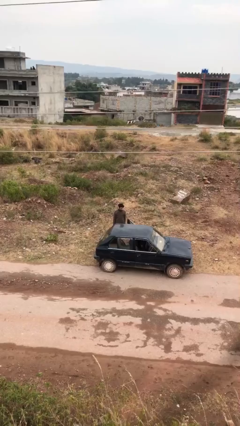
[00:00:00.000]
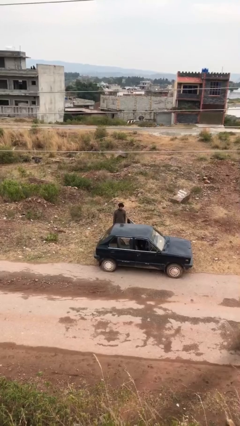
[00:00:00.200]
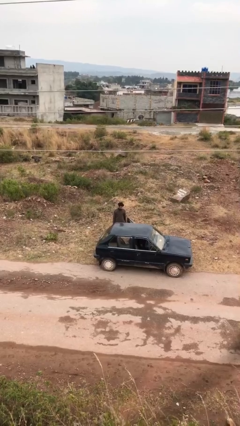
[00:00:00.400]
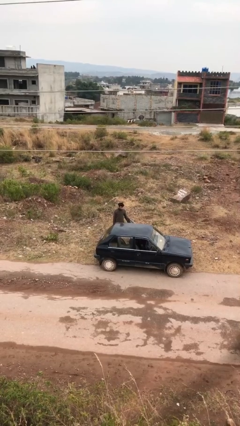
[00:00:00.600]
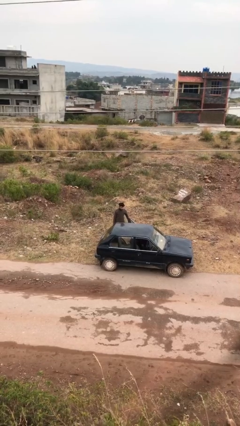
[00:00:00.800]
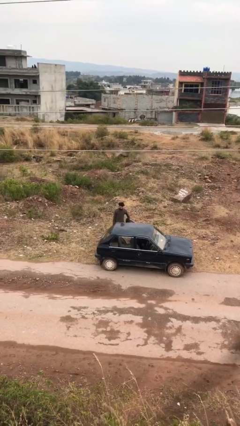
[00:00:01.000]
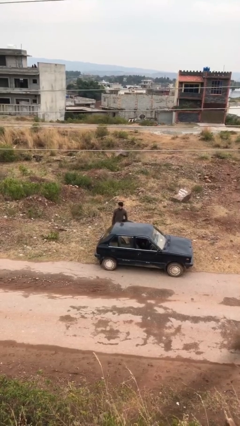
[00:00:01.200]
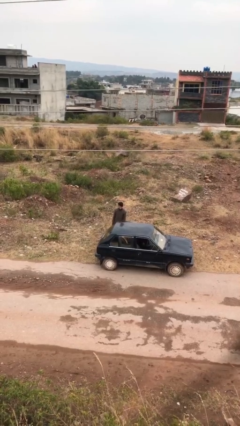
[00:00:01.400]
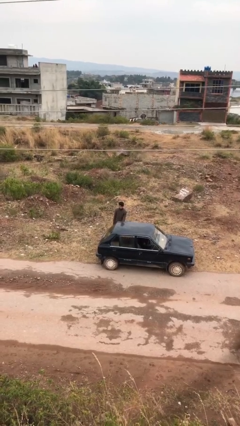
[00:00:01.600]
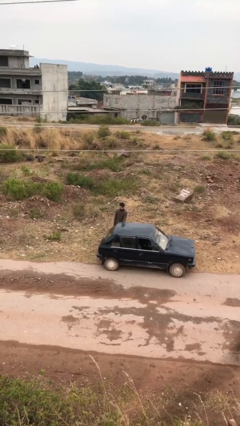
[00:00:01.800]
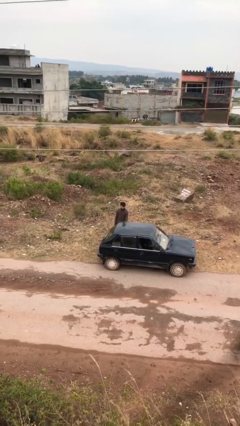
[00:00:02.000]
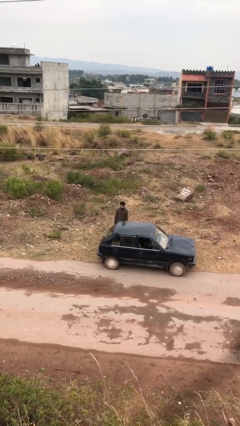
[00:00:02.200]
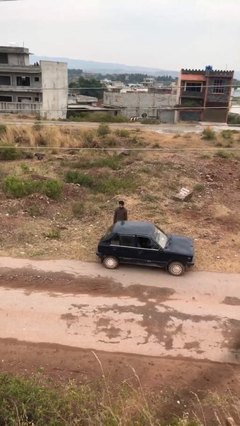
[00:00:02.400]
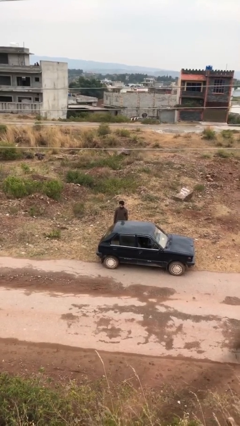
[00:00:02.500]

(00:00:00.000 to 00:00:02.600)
person closes car door

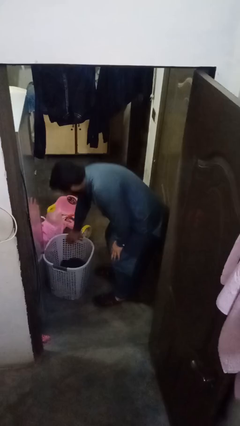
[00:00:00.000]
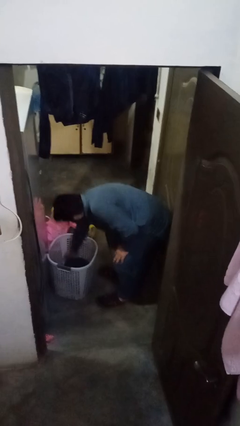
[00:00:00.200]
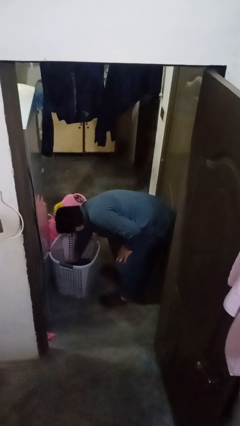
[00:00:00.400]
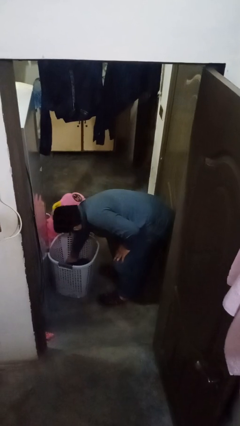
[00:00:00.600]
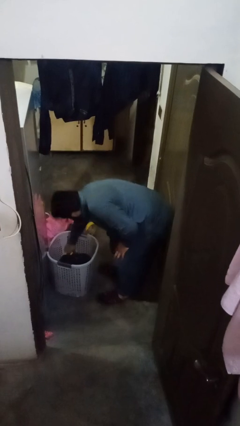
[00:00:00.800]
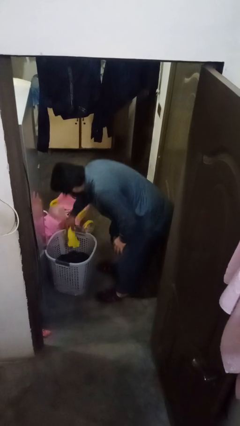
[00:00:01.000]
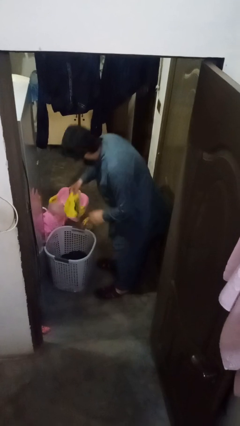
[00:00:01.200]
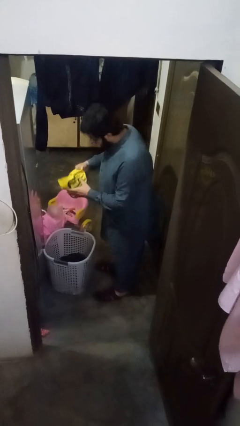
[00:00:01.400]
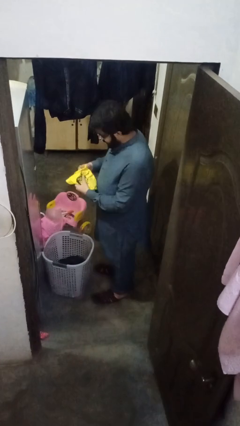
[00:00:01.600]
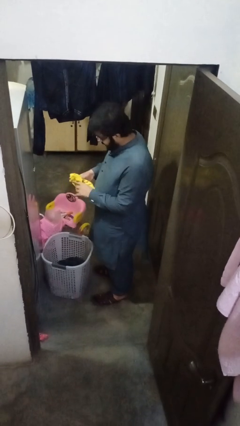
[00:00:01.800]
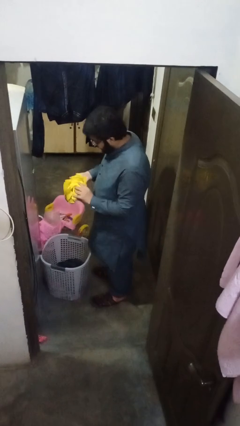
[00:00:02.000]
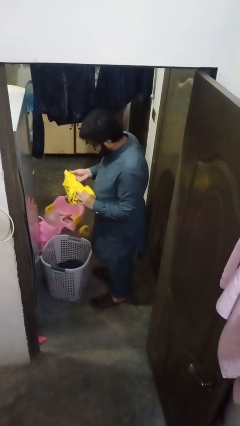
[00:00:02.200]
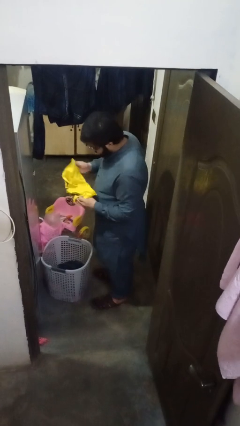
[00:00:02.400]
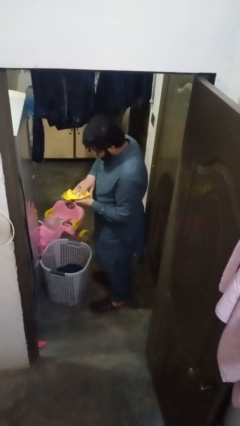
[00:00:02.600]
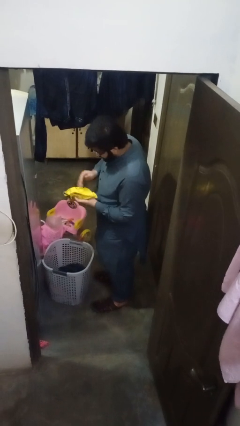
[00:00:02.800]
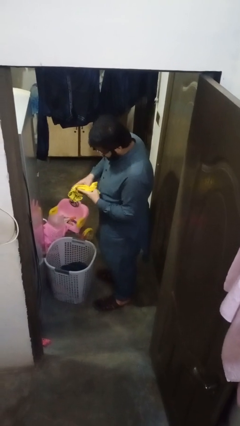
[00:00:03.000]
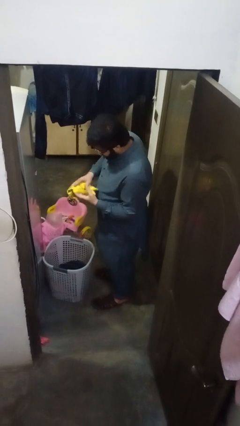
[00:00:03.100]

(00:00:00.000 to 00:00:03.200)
person folds shirt

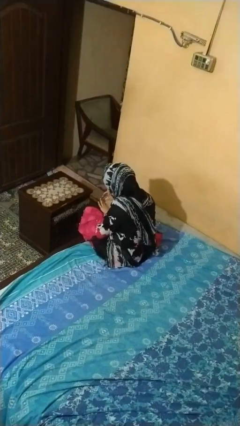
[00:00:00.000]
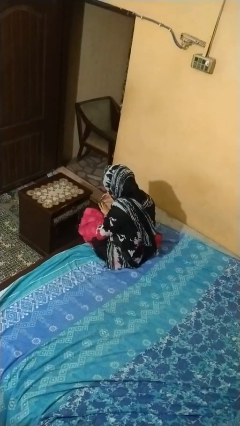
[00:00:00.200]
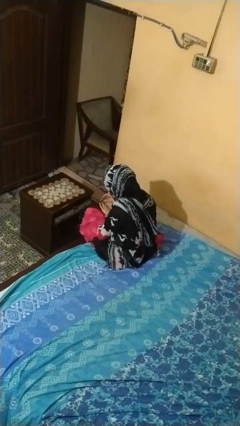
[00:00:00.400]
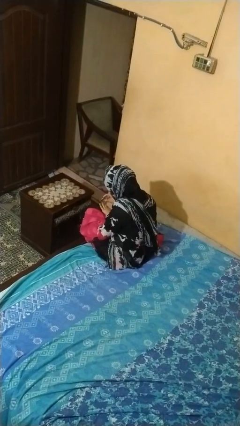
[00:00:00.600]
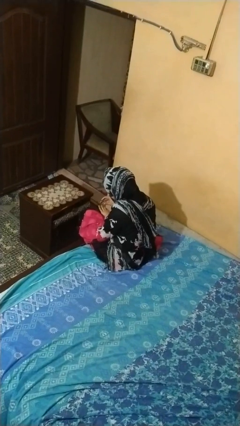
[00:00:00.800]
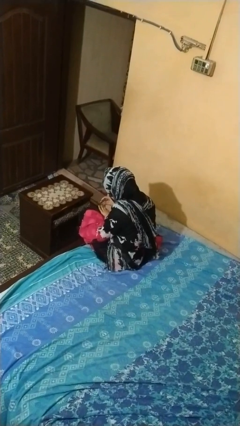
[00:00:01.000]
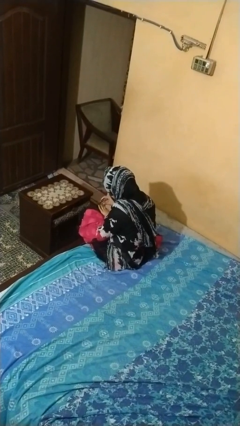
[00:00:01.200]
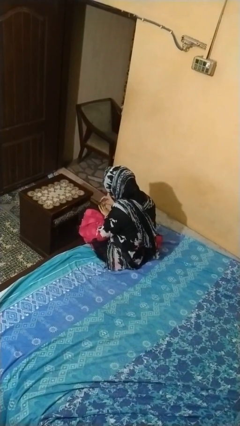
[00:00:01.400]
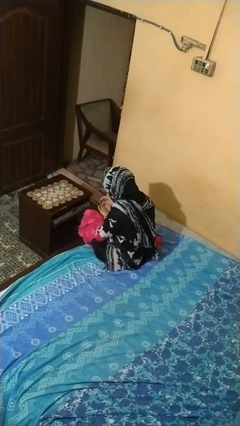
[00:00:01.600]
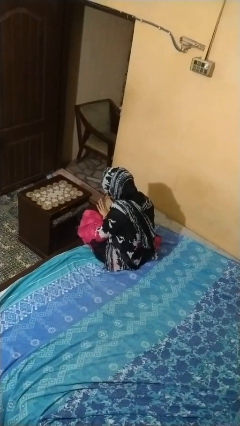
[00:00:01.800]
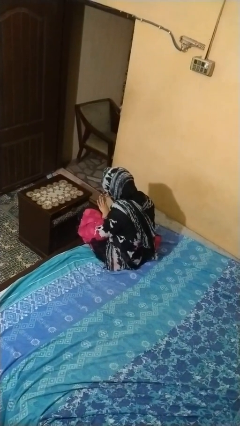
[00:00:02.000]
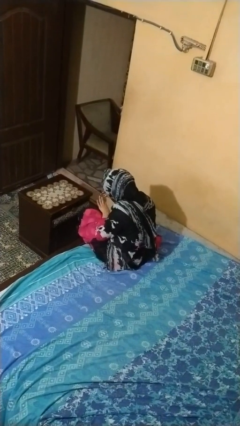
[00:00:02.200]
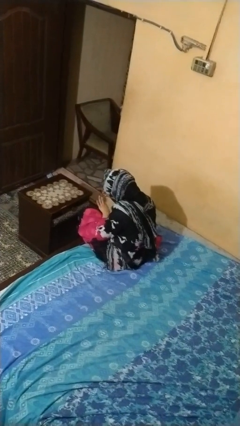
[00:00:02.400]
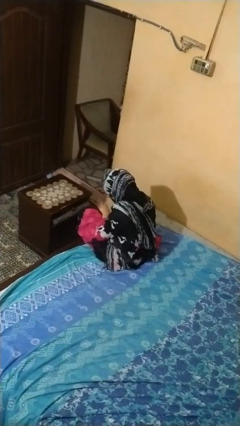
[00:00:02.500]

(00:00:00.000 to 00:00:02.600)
person clips fingernails

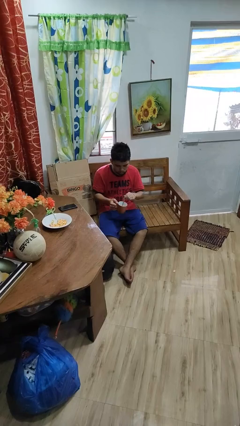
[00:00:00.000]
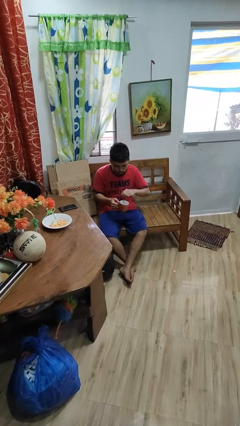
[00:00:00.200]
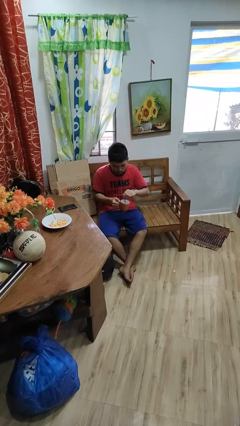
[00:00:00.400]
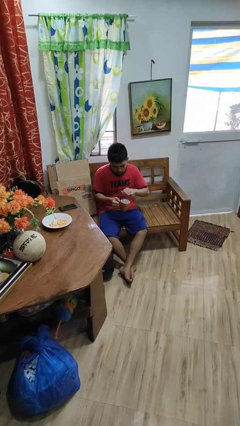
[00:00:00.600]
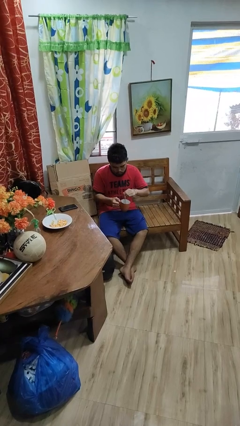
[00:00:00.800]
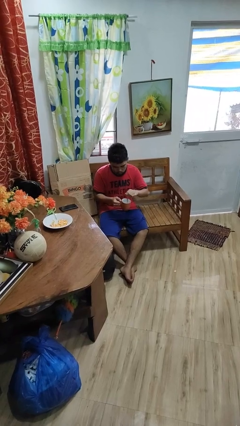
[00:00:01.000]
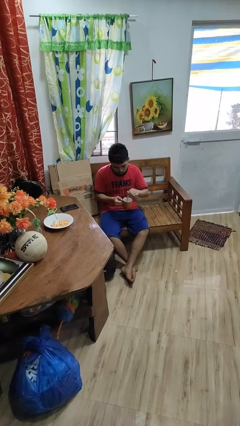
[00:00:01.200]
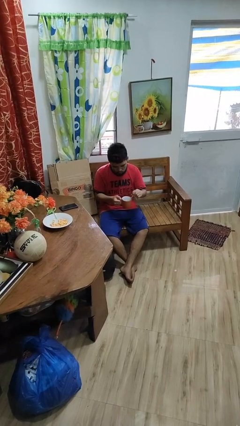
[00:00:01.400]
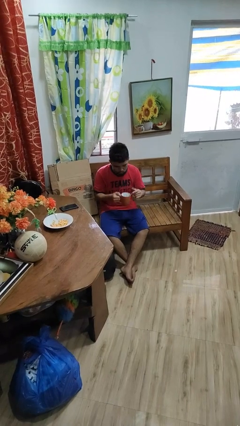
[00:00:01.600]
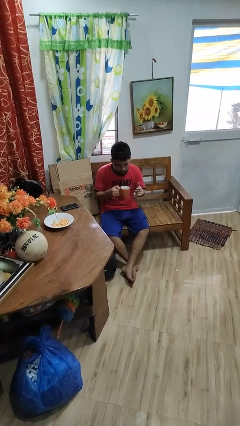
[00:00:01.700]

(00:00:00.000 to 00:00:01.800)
person stirs mug

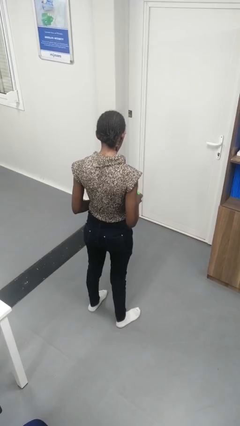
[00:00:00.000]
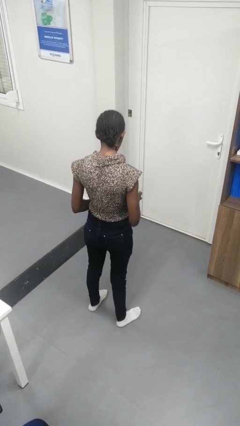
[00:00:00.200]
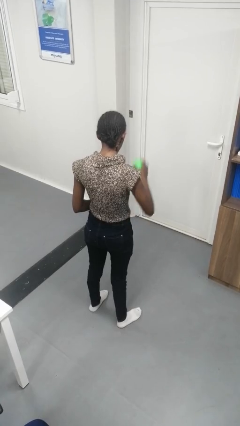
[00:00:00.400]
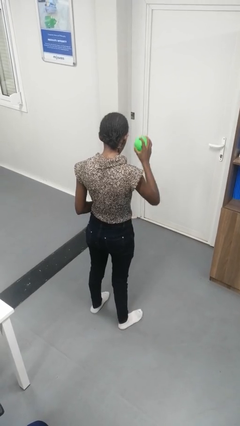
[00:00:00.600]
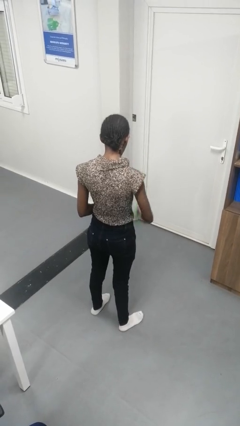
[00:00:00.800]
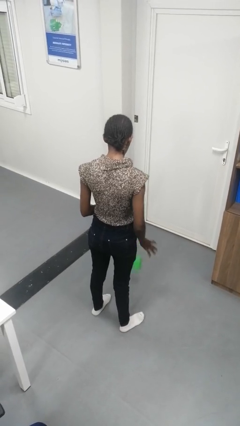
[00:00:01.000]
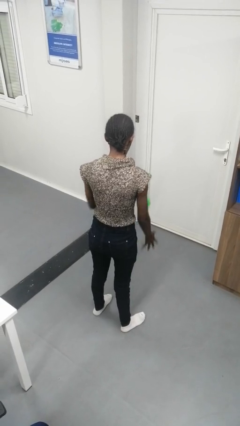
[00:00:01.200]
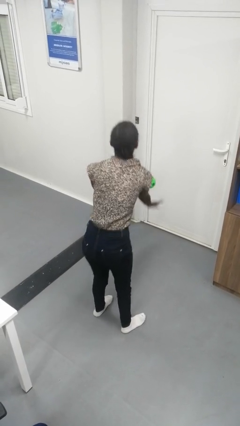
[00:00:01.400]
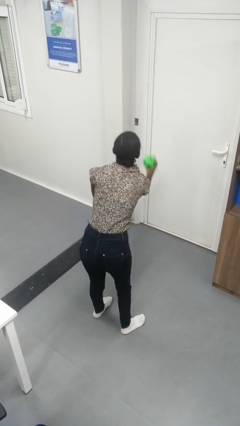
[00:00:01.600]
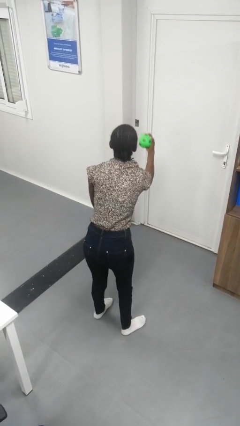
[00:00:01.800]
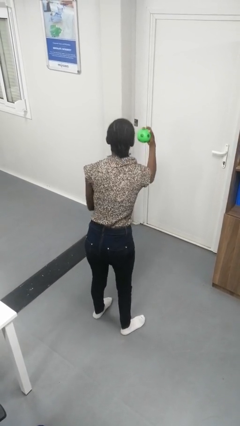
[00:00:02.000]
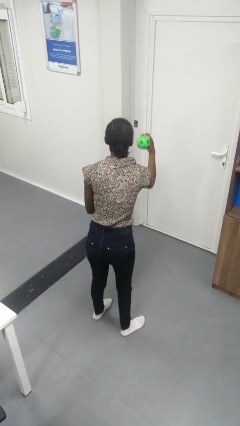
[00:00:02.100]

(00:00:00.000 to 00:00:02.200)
person bounces ball on floor

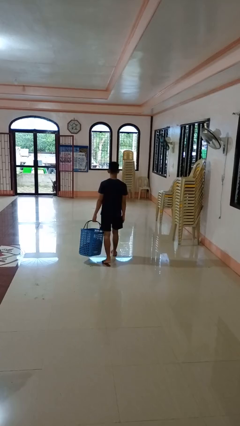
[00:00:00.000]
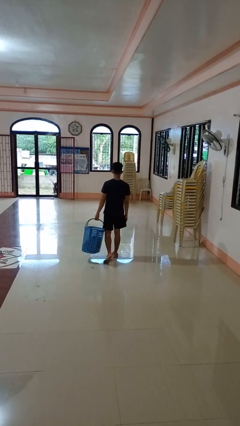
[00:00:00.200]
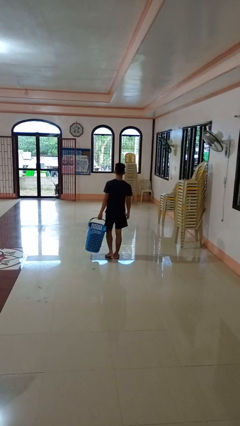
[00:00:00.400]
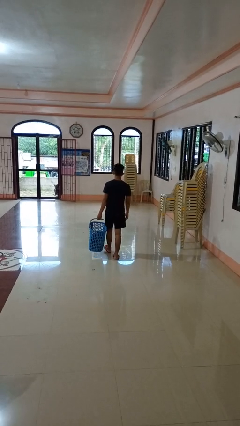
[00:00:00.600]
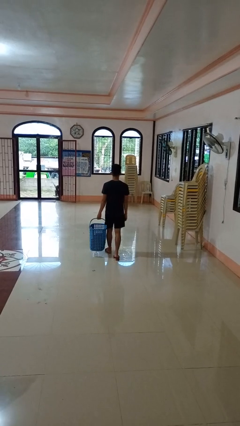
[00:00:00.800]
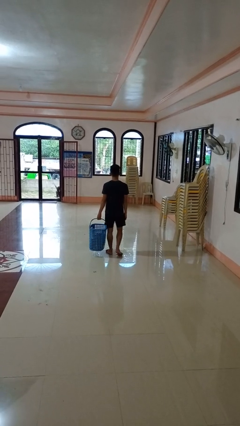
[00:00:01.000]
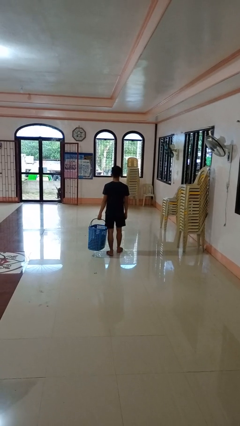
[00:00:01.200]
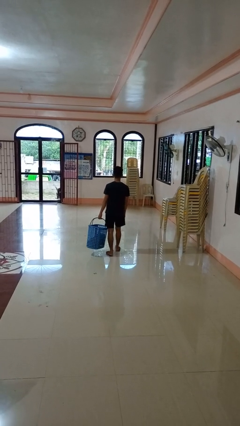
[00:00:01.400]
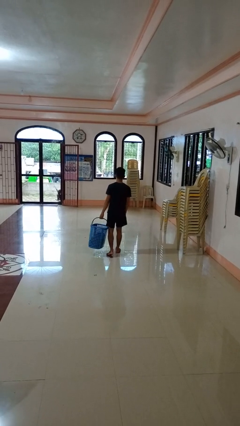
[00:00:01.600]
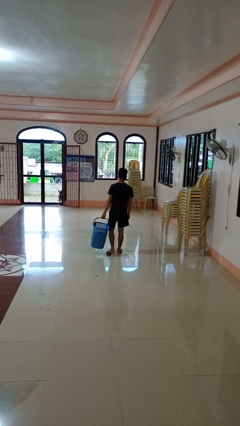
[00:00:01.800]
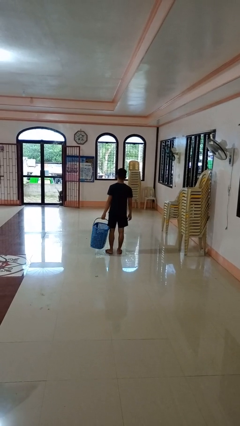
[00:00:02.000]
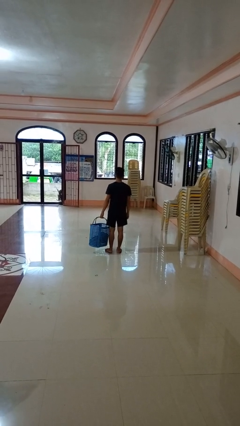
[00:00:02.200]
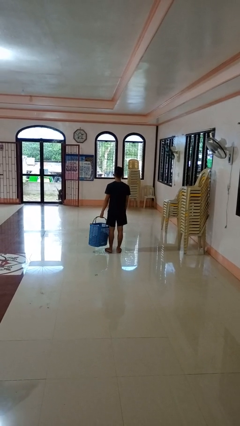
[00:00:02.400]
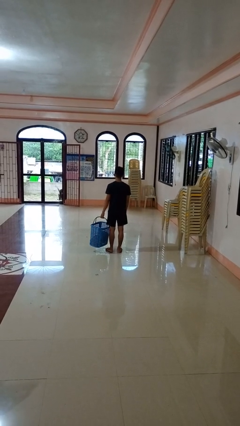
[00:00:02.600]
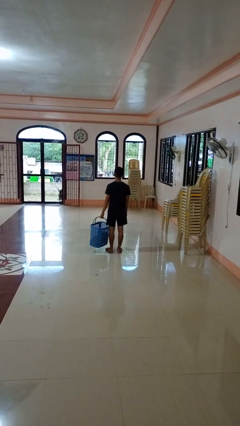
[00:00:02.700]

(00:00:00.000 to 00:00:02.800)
person carries laundry basket

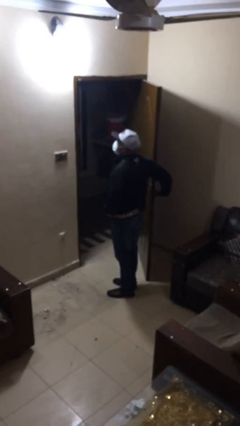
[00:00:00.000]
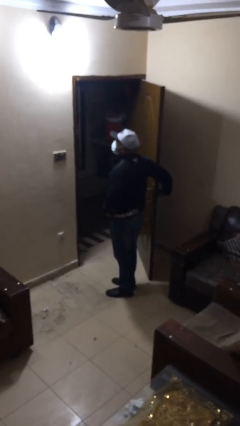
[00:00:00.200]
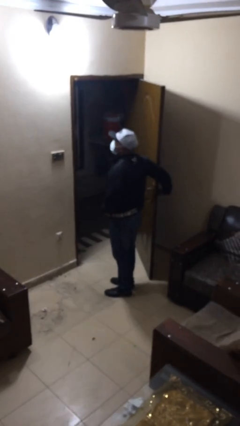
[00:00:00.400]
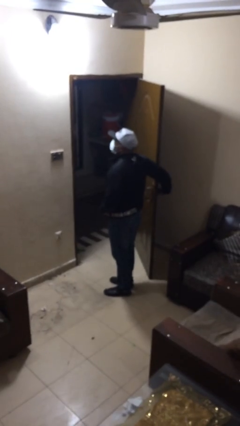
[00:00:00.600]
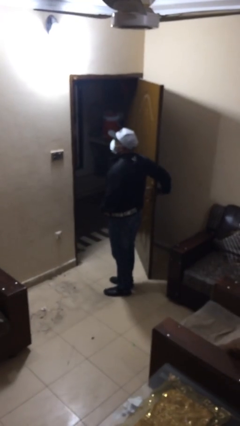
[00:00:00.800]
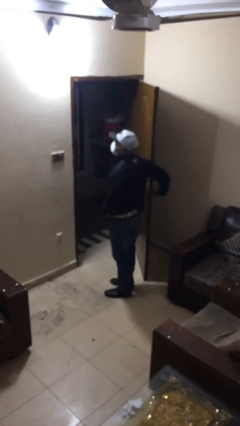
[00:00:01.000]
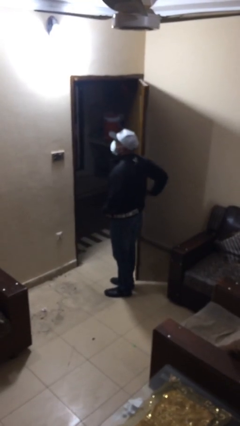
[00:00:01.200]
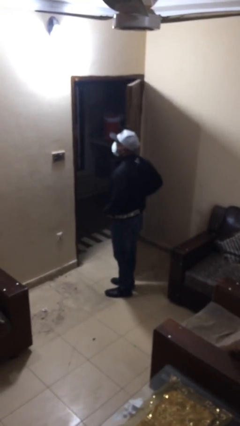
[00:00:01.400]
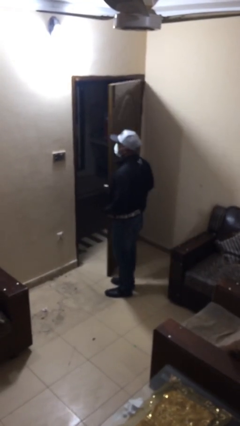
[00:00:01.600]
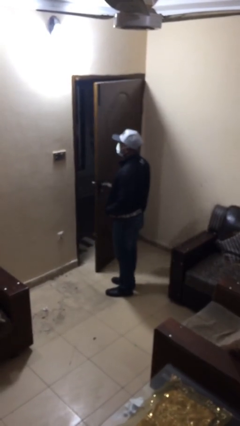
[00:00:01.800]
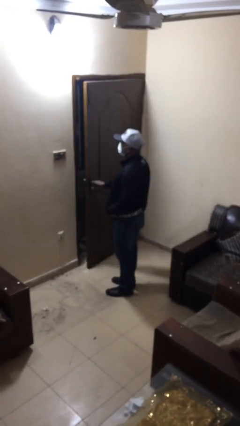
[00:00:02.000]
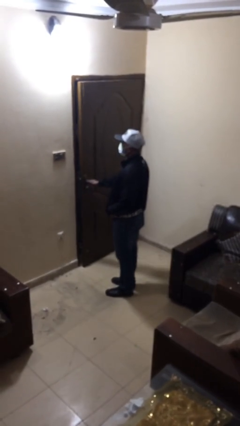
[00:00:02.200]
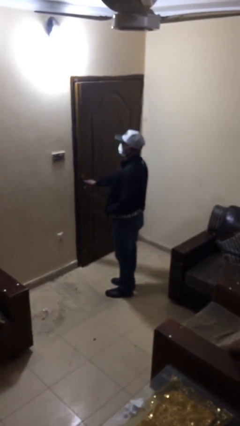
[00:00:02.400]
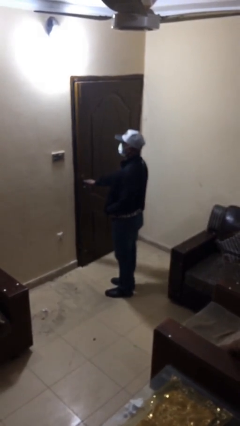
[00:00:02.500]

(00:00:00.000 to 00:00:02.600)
person closes facility door
